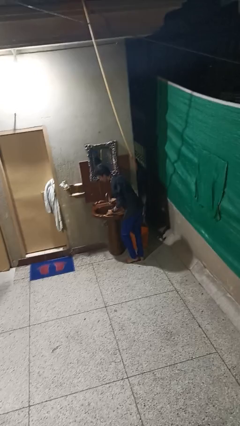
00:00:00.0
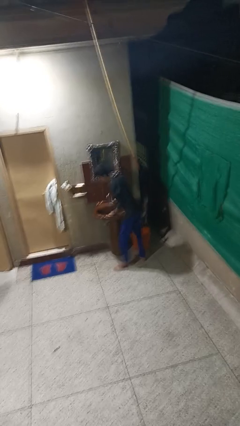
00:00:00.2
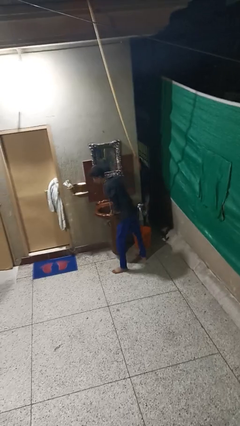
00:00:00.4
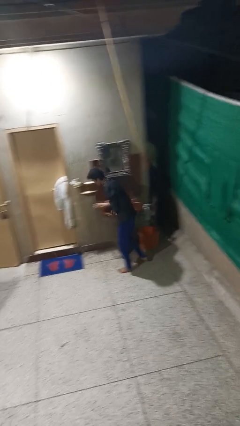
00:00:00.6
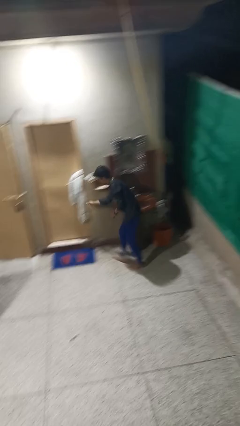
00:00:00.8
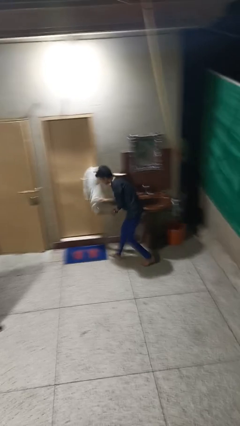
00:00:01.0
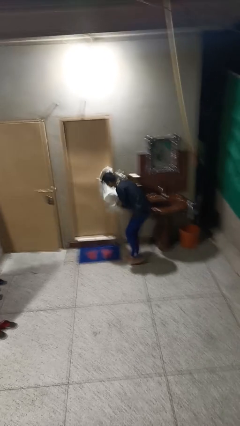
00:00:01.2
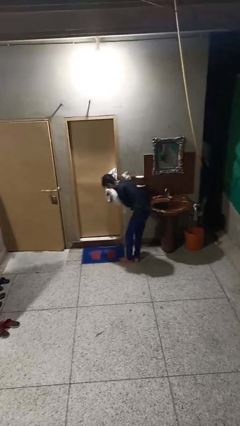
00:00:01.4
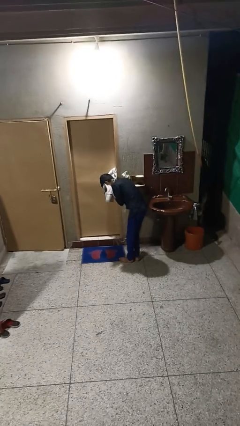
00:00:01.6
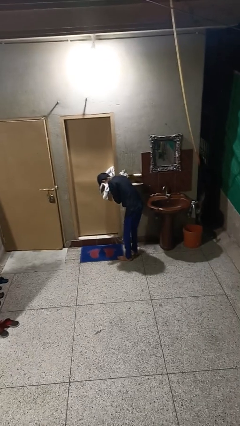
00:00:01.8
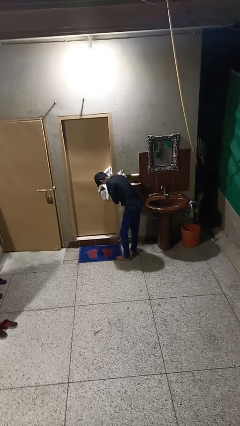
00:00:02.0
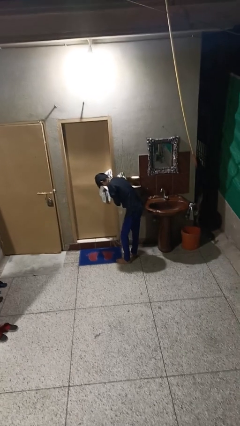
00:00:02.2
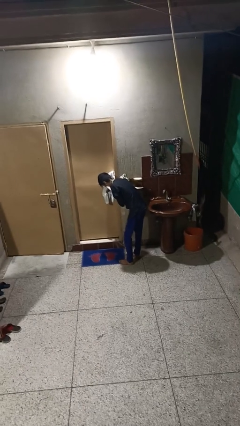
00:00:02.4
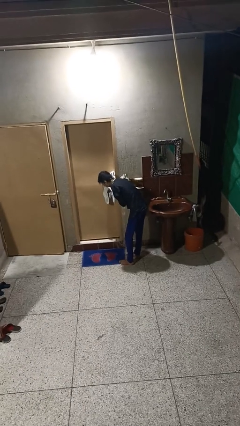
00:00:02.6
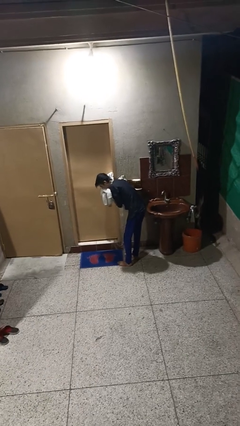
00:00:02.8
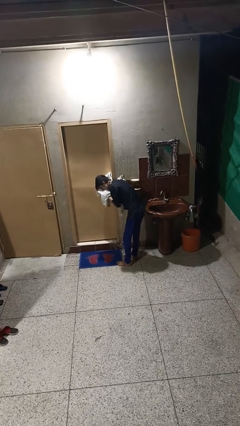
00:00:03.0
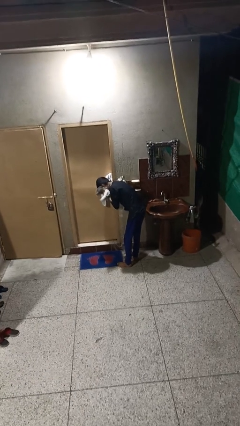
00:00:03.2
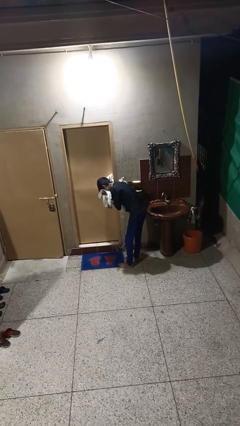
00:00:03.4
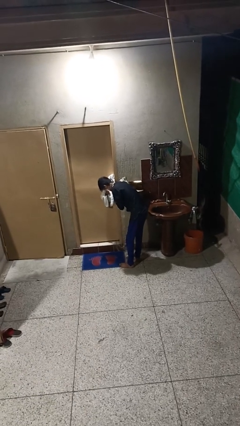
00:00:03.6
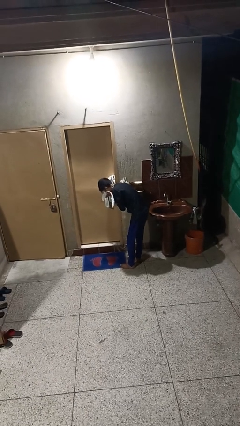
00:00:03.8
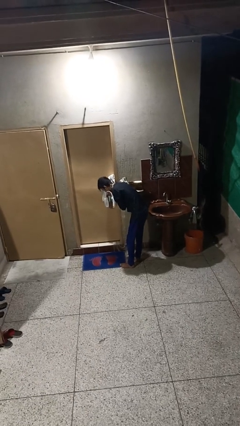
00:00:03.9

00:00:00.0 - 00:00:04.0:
person dries face with towel

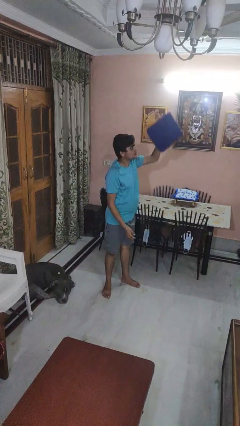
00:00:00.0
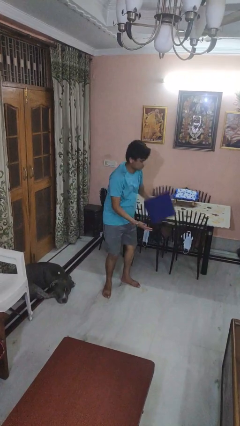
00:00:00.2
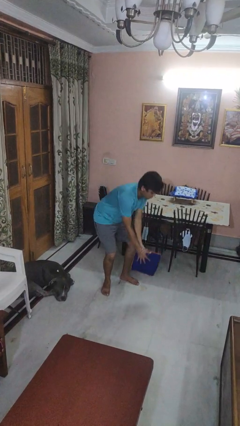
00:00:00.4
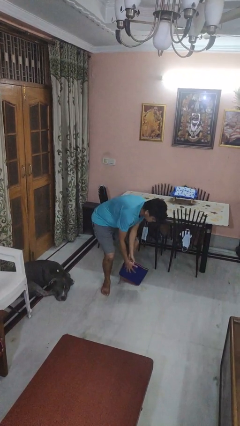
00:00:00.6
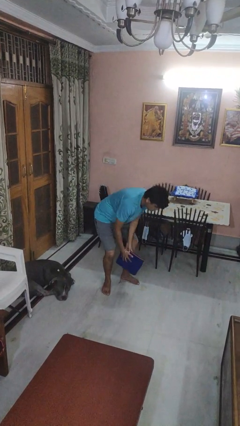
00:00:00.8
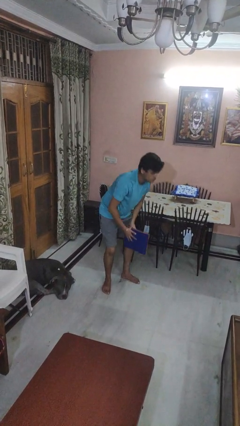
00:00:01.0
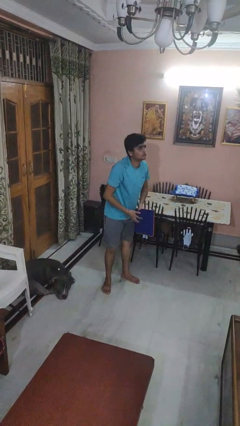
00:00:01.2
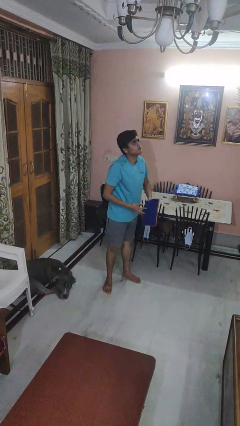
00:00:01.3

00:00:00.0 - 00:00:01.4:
person catches dropped object

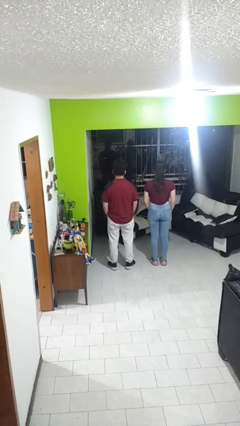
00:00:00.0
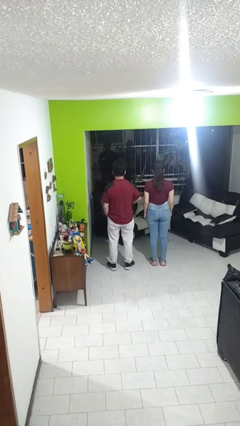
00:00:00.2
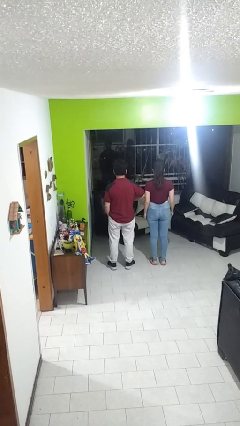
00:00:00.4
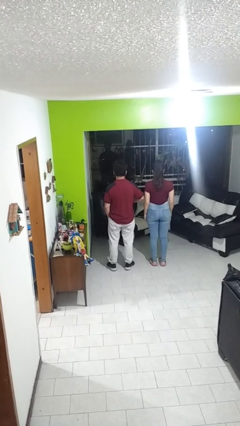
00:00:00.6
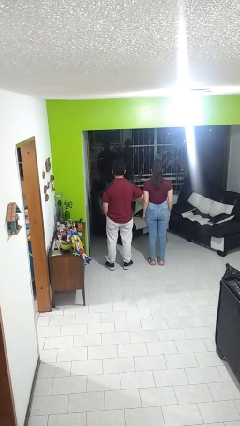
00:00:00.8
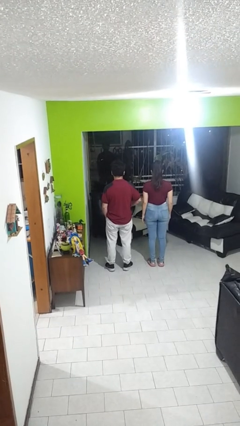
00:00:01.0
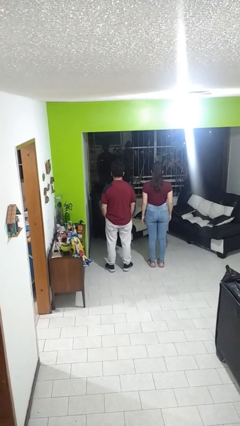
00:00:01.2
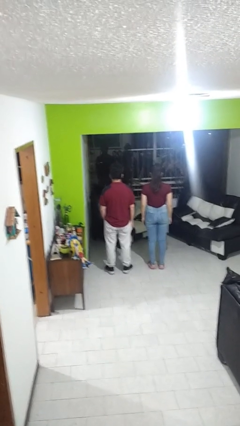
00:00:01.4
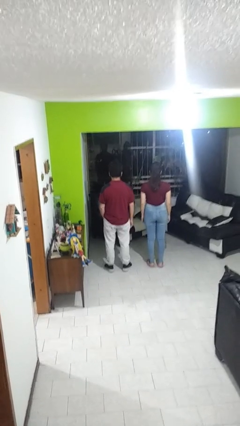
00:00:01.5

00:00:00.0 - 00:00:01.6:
person nudges person with elbow

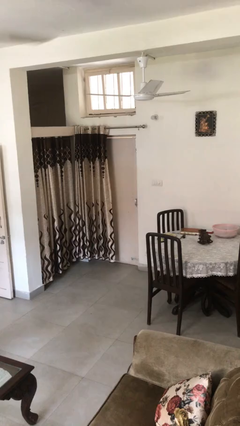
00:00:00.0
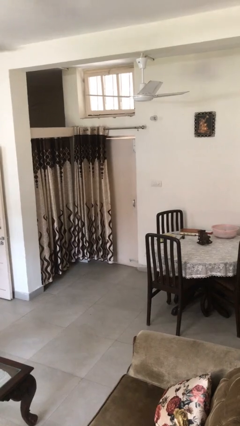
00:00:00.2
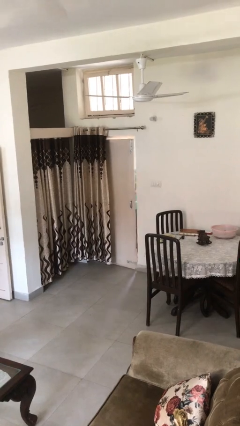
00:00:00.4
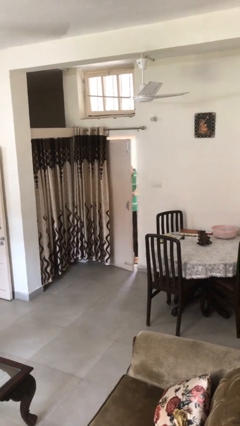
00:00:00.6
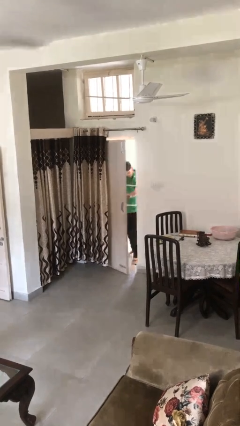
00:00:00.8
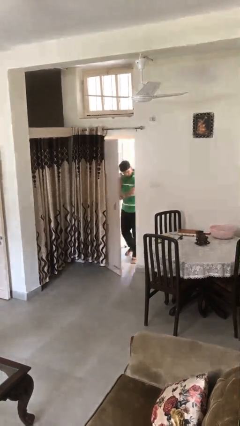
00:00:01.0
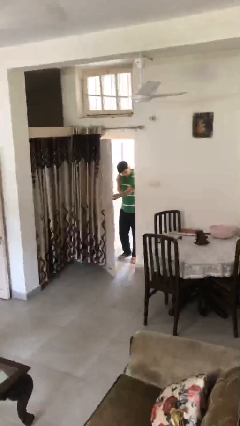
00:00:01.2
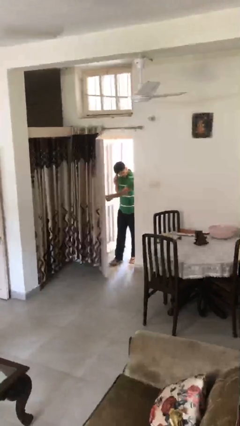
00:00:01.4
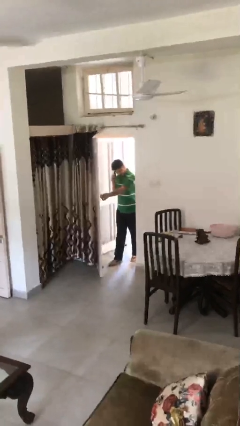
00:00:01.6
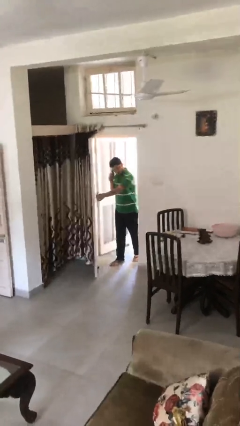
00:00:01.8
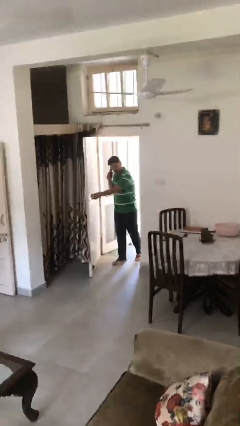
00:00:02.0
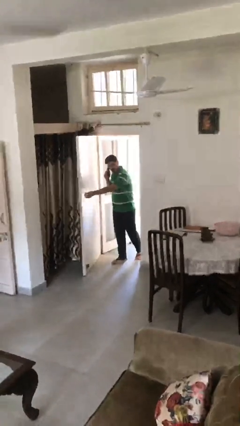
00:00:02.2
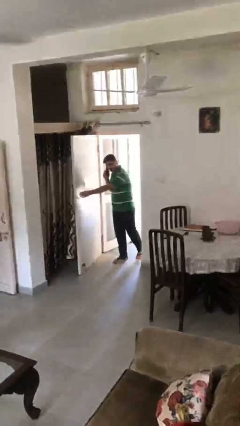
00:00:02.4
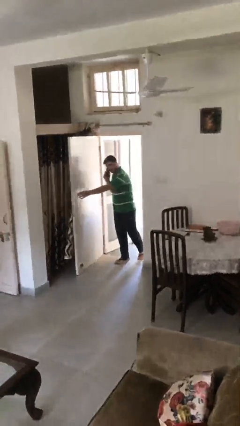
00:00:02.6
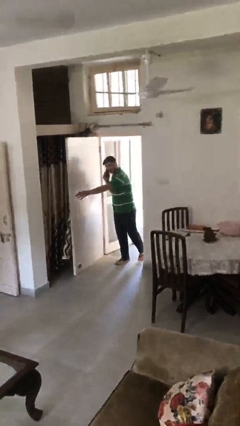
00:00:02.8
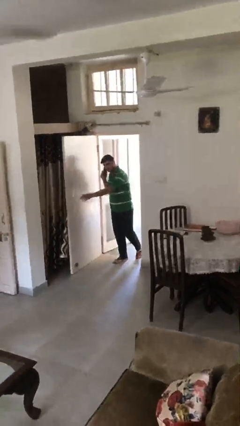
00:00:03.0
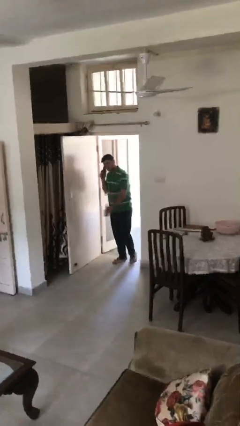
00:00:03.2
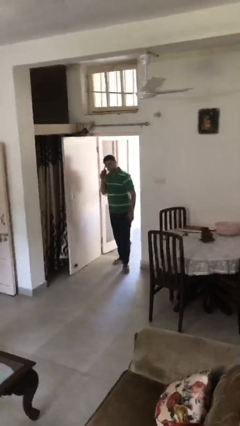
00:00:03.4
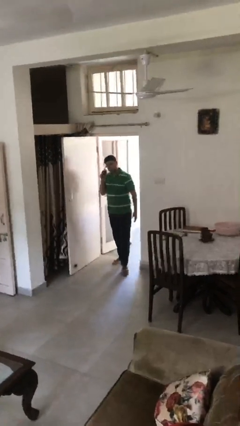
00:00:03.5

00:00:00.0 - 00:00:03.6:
person opens facility door

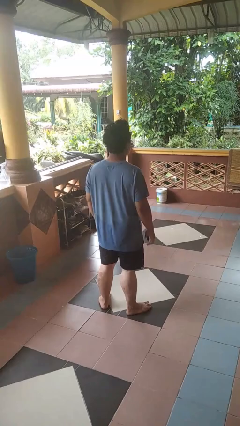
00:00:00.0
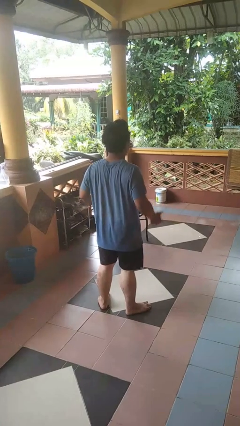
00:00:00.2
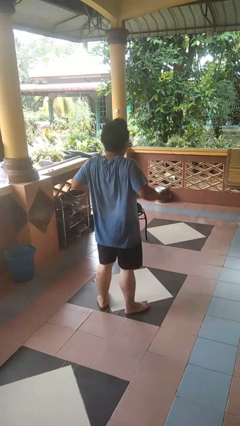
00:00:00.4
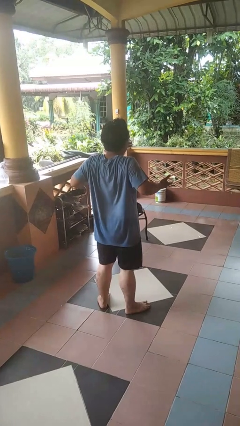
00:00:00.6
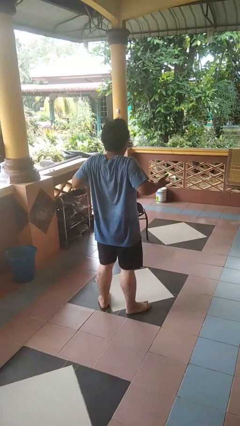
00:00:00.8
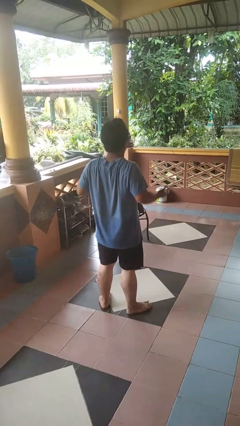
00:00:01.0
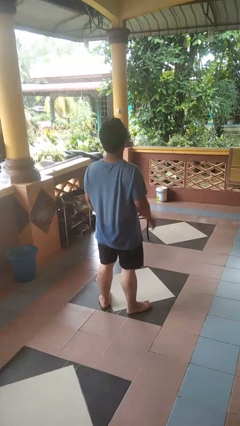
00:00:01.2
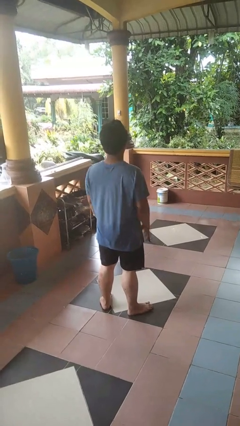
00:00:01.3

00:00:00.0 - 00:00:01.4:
person shrugs

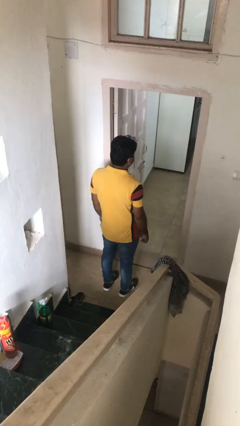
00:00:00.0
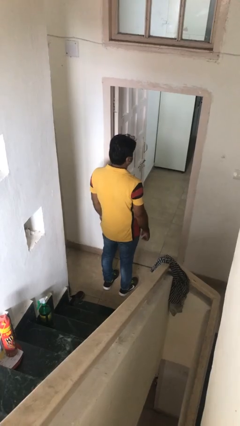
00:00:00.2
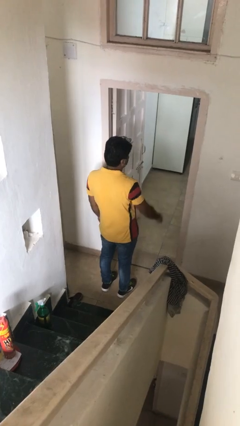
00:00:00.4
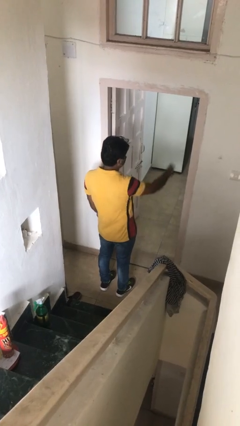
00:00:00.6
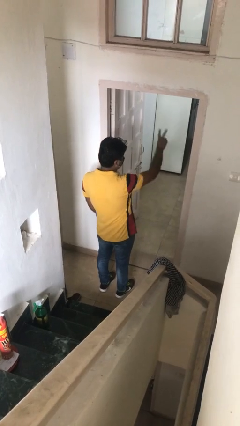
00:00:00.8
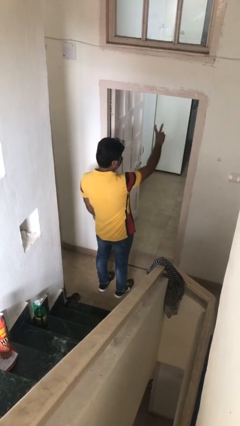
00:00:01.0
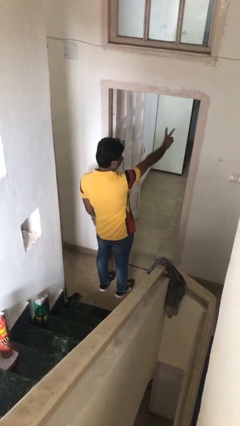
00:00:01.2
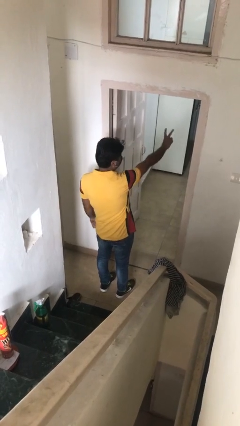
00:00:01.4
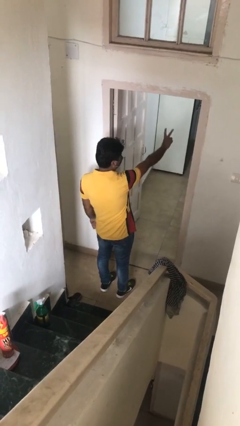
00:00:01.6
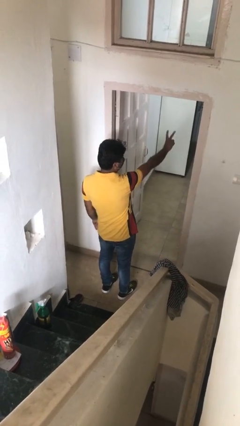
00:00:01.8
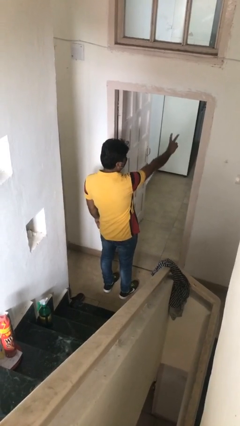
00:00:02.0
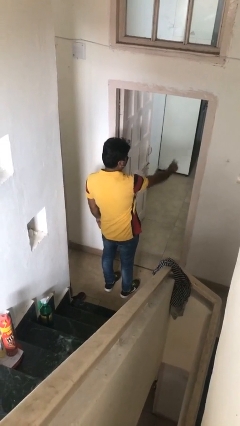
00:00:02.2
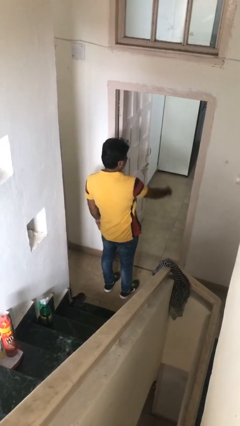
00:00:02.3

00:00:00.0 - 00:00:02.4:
person gestures peace

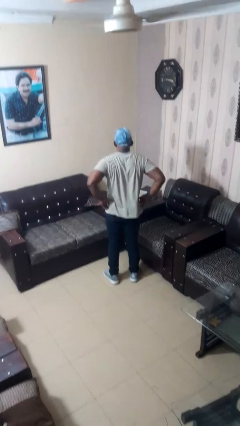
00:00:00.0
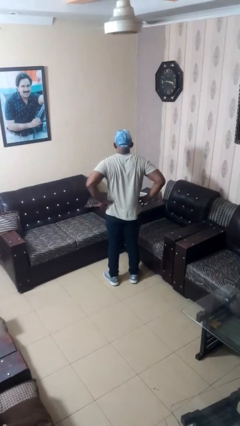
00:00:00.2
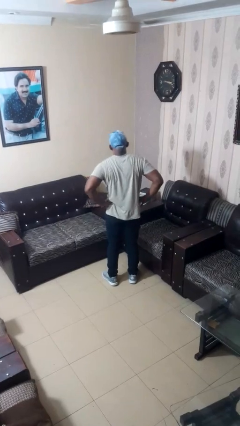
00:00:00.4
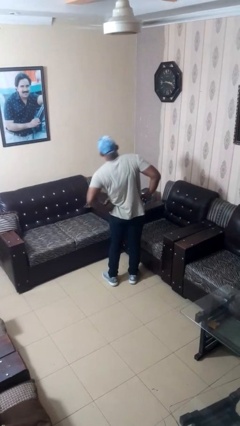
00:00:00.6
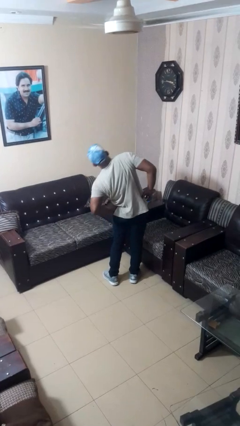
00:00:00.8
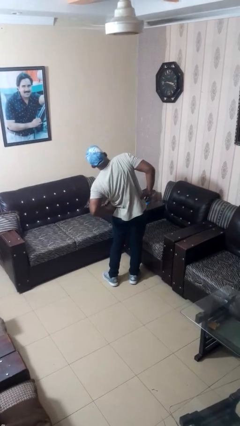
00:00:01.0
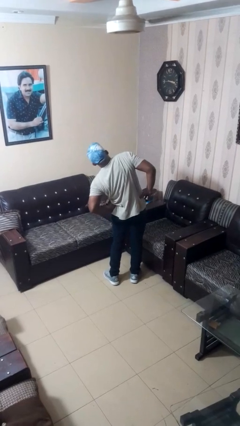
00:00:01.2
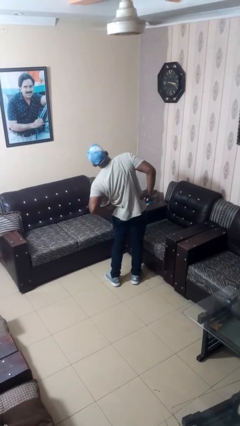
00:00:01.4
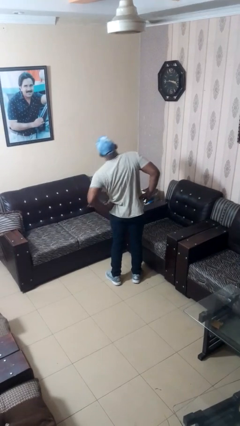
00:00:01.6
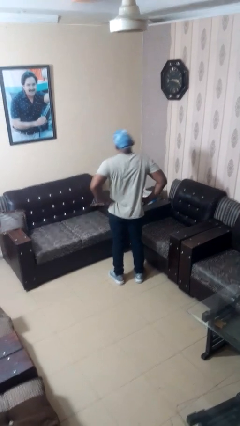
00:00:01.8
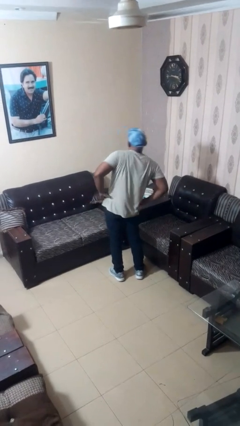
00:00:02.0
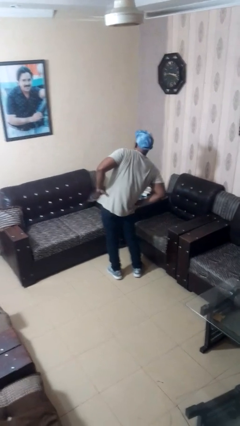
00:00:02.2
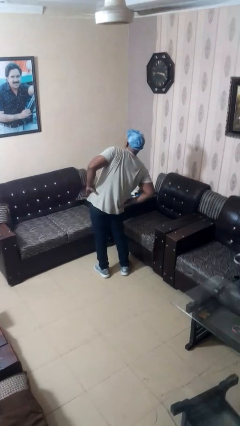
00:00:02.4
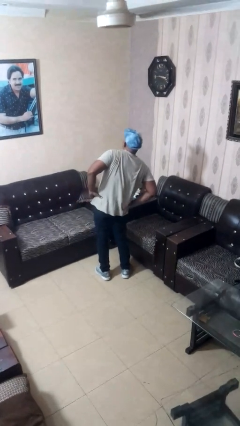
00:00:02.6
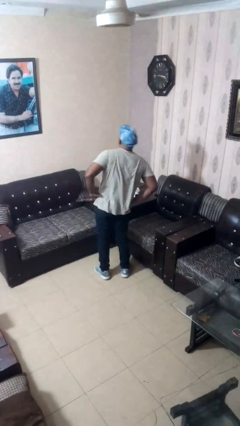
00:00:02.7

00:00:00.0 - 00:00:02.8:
person stretches arms to side
